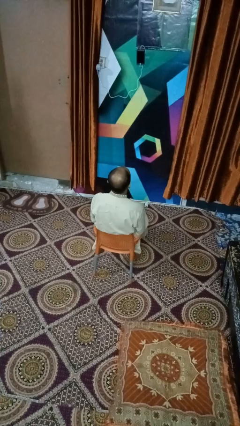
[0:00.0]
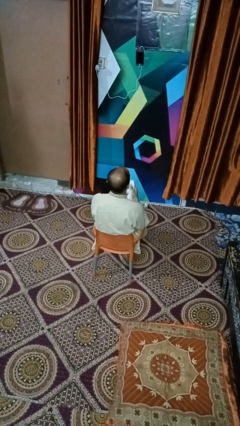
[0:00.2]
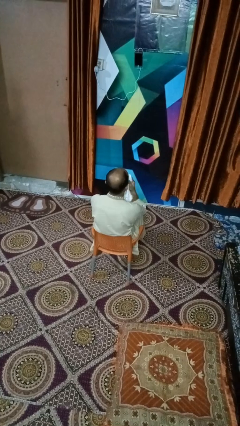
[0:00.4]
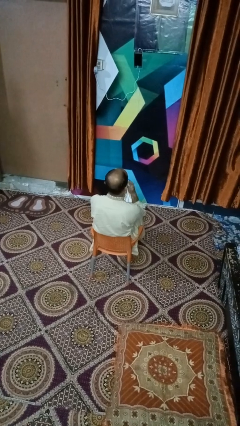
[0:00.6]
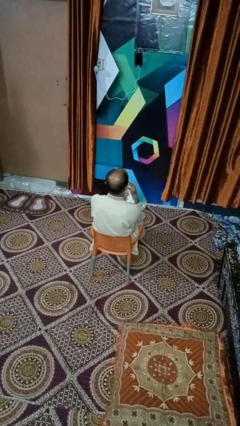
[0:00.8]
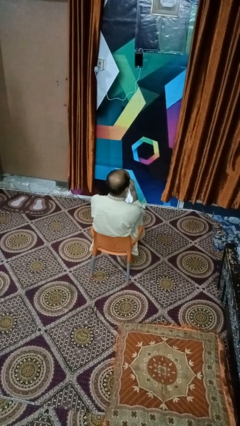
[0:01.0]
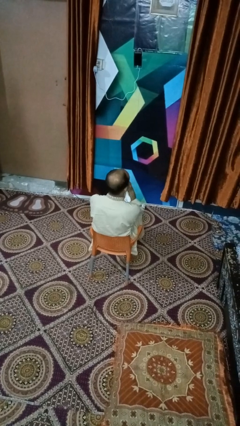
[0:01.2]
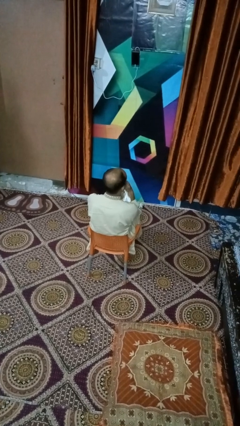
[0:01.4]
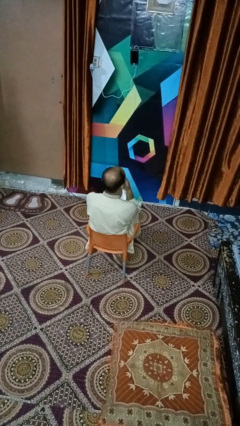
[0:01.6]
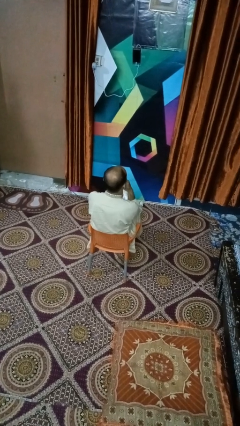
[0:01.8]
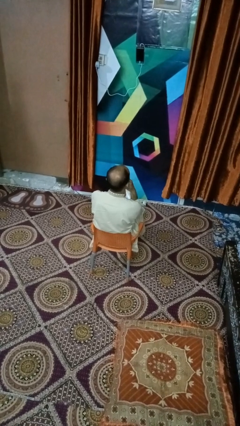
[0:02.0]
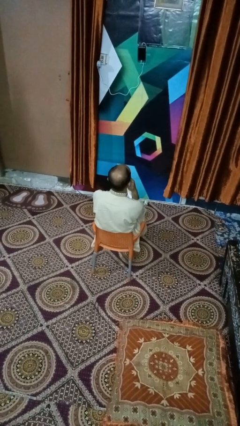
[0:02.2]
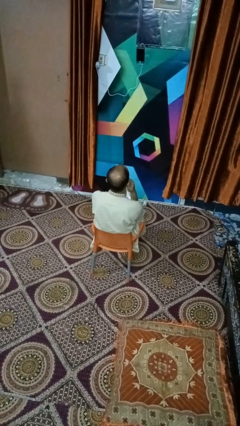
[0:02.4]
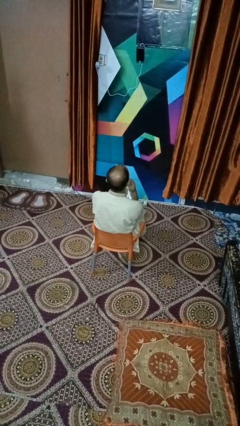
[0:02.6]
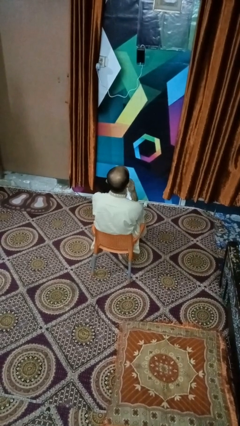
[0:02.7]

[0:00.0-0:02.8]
person wipes mouth with napkin

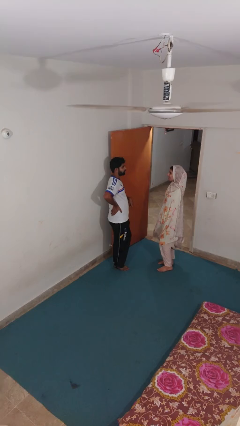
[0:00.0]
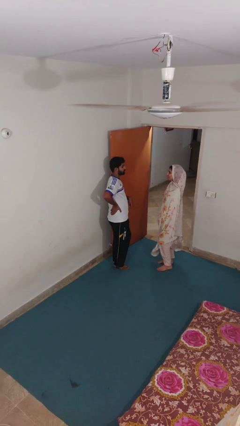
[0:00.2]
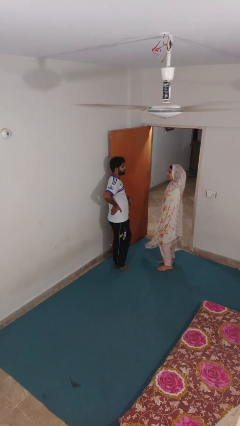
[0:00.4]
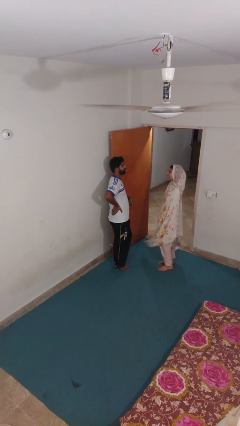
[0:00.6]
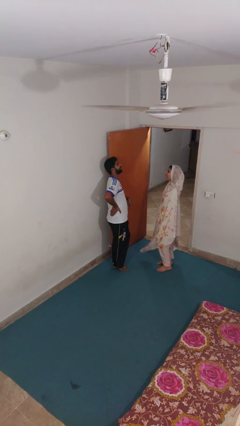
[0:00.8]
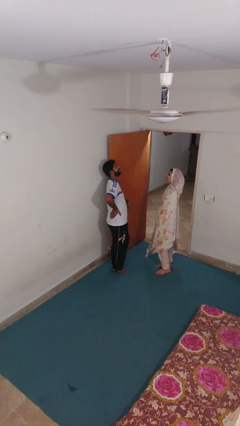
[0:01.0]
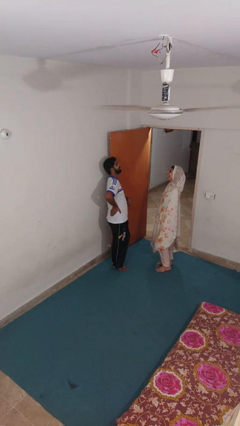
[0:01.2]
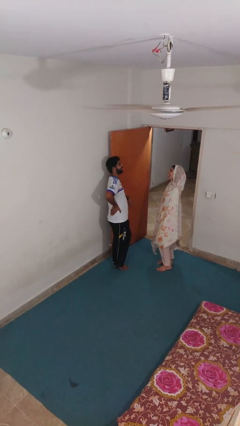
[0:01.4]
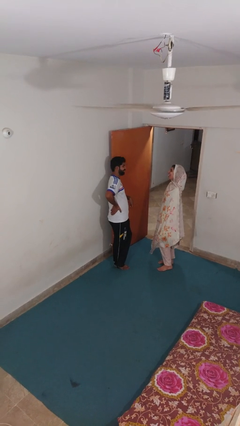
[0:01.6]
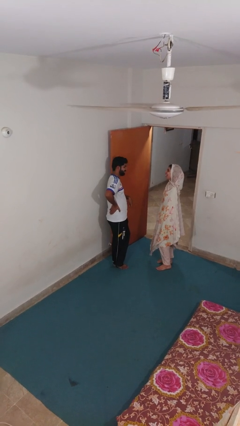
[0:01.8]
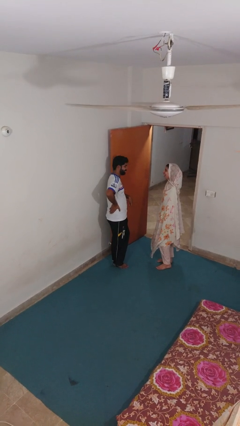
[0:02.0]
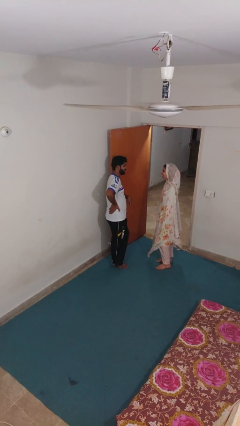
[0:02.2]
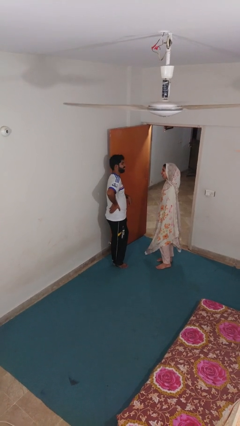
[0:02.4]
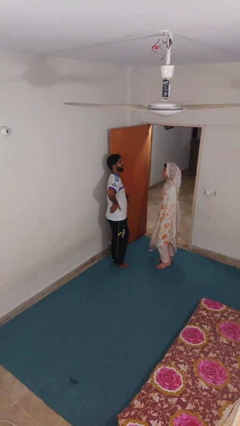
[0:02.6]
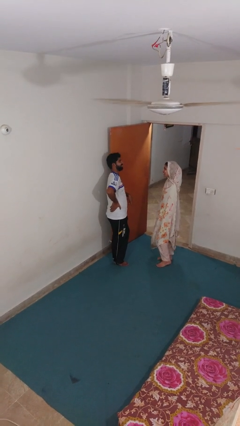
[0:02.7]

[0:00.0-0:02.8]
person laughs with person

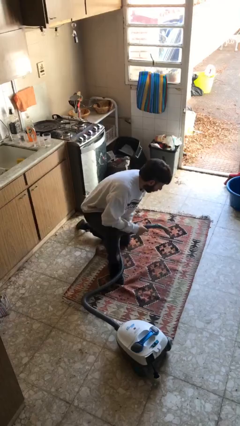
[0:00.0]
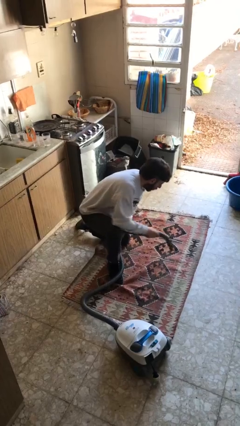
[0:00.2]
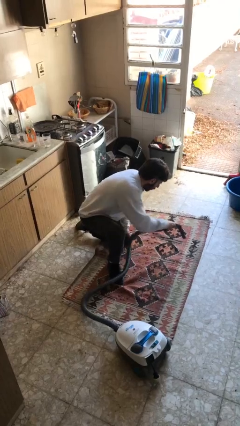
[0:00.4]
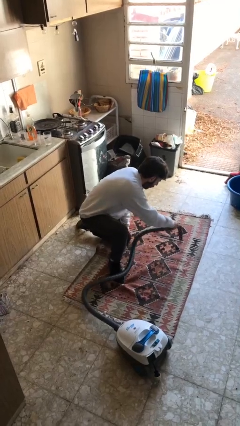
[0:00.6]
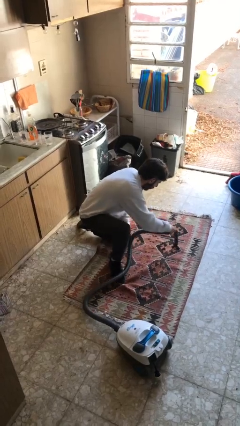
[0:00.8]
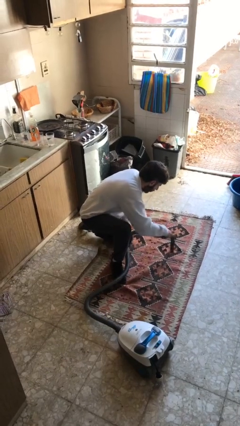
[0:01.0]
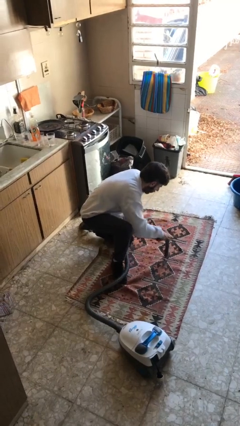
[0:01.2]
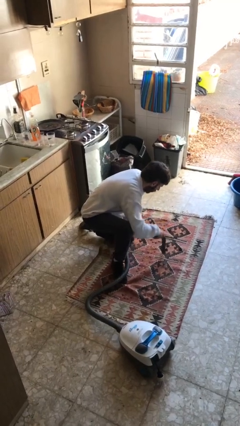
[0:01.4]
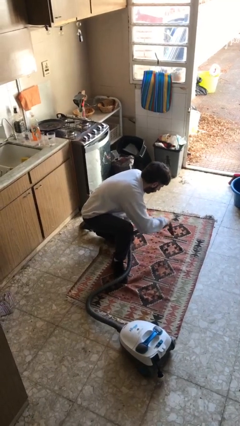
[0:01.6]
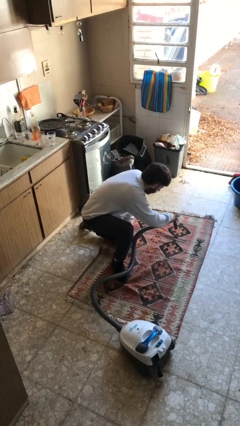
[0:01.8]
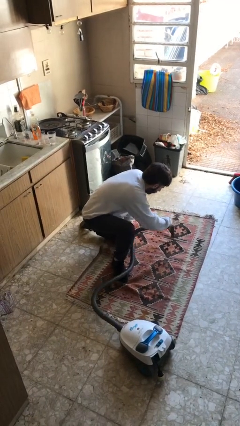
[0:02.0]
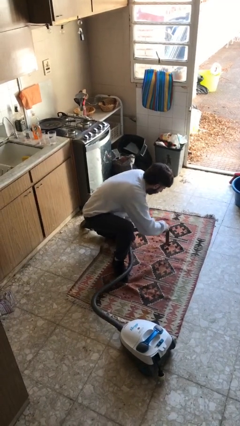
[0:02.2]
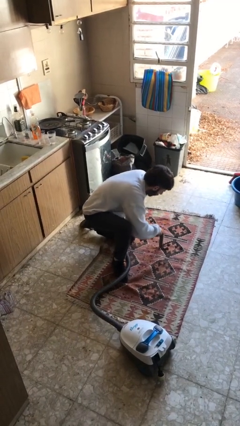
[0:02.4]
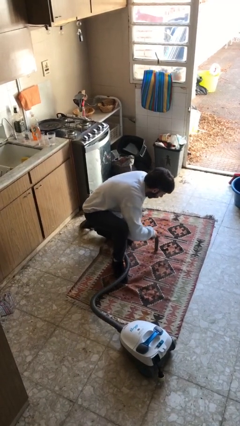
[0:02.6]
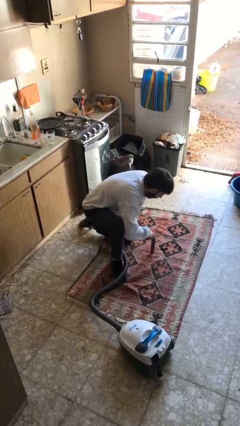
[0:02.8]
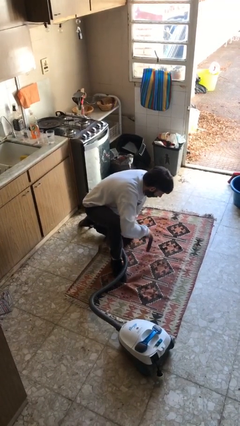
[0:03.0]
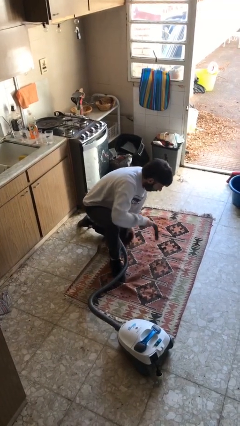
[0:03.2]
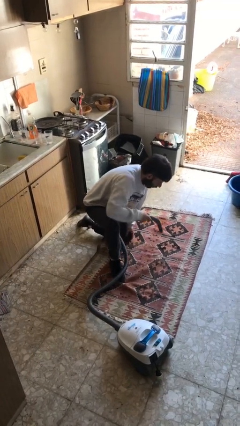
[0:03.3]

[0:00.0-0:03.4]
person vacuums carpet

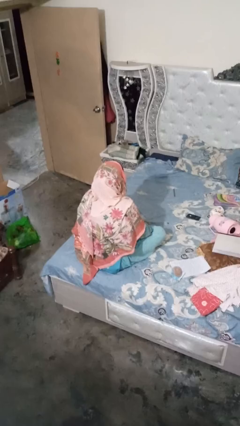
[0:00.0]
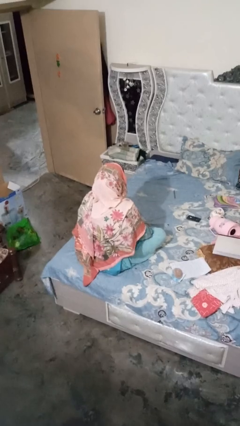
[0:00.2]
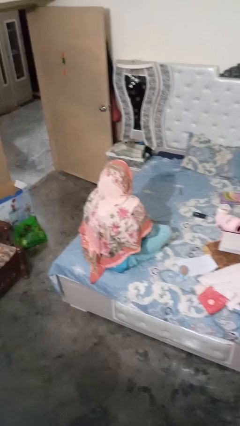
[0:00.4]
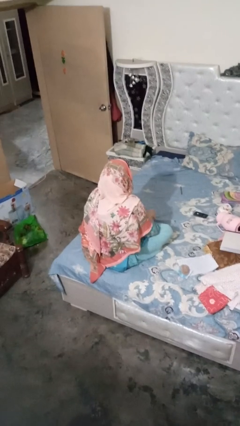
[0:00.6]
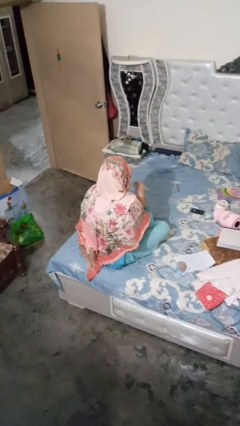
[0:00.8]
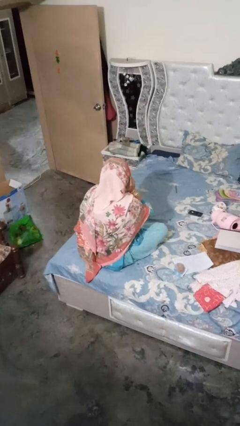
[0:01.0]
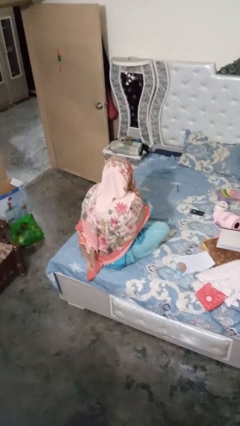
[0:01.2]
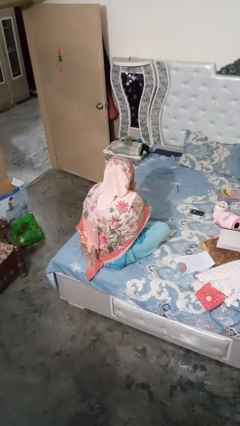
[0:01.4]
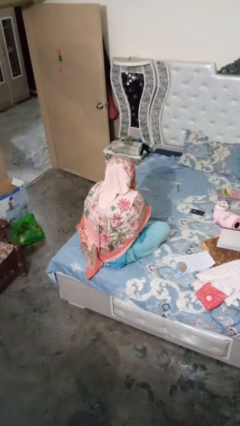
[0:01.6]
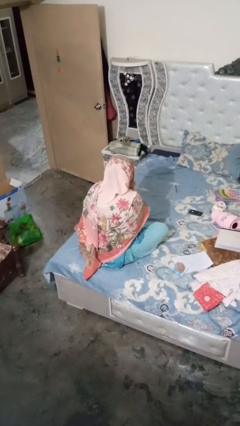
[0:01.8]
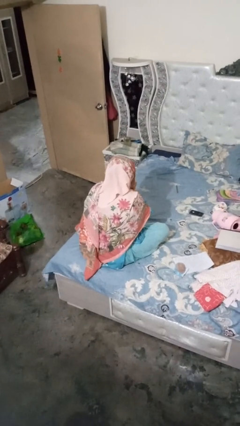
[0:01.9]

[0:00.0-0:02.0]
person gestures listen closely

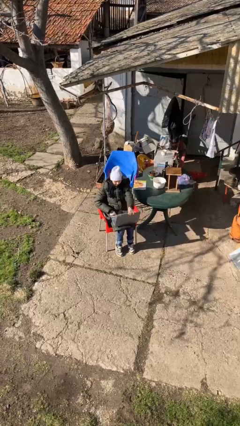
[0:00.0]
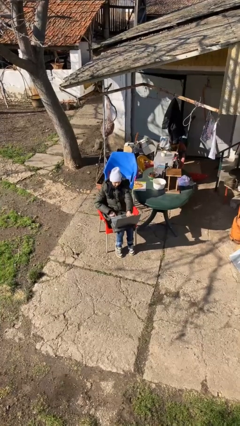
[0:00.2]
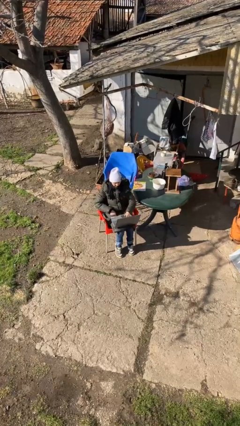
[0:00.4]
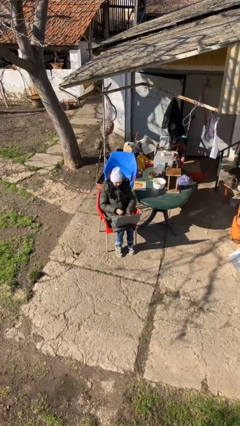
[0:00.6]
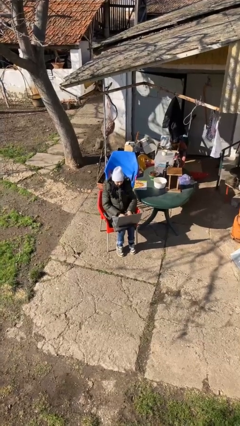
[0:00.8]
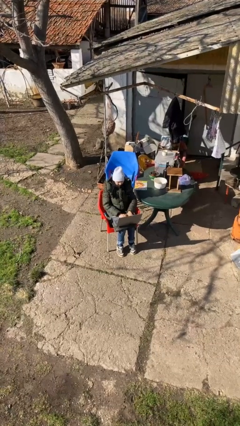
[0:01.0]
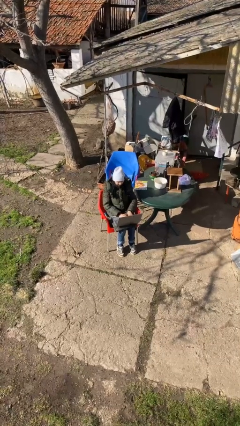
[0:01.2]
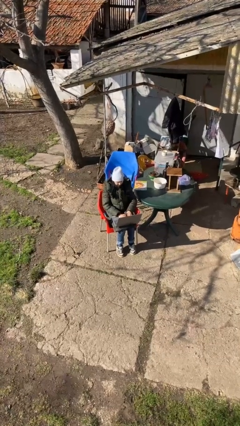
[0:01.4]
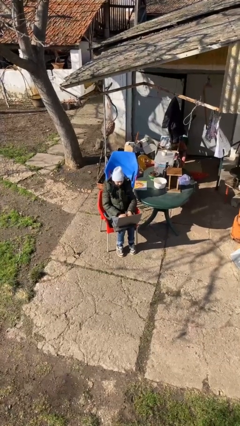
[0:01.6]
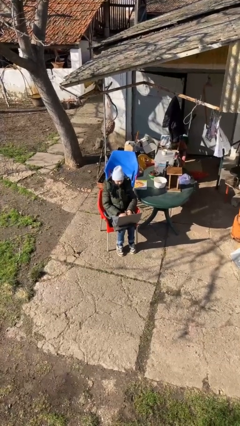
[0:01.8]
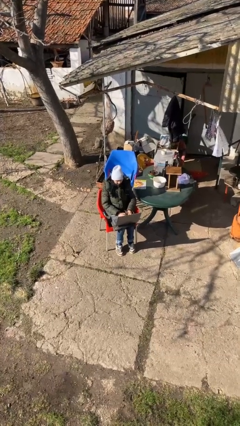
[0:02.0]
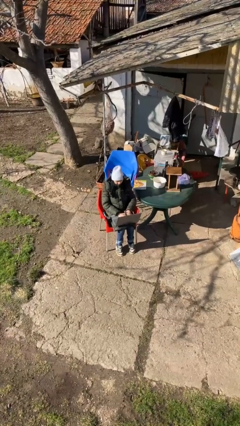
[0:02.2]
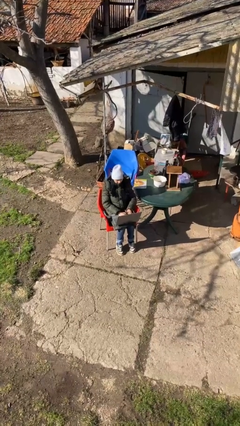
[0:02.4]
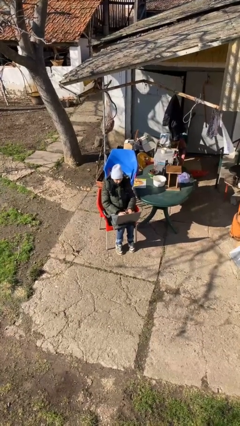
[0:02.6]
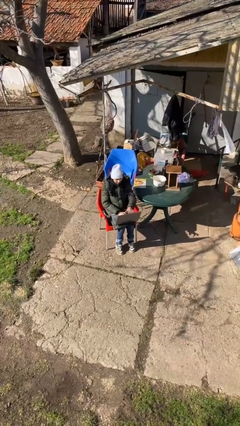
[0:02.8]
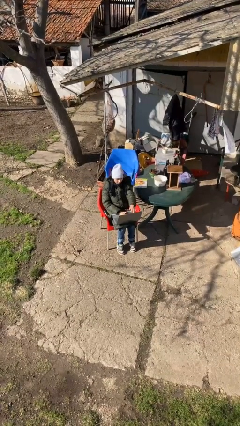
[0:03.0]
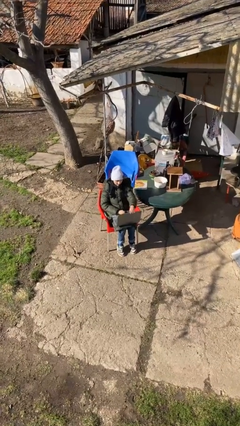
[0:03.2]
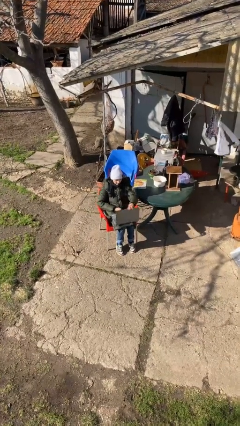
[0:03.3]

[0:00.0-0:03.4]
person interacts with laptop

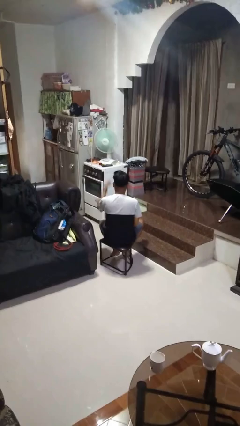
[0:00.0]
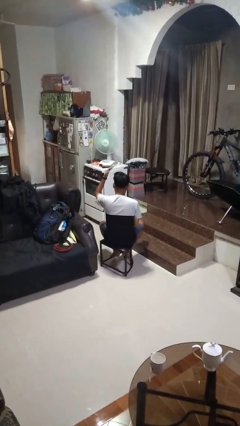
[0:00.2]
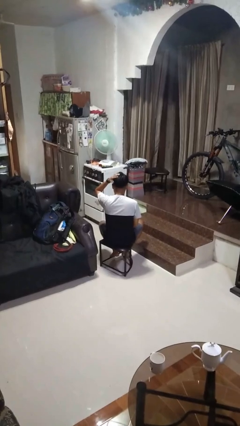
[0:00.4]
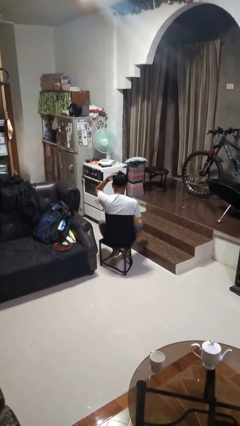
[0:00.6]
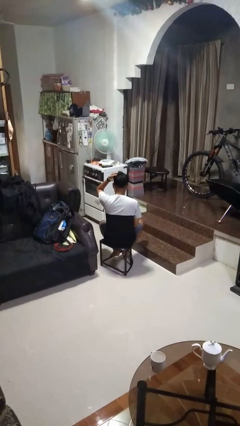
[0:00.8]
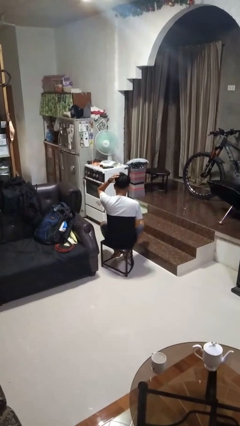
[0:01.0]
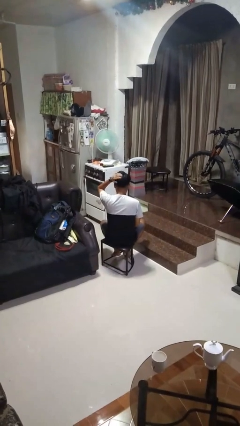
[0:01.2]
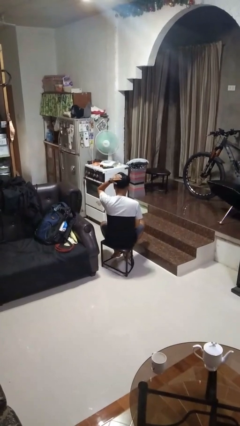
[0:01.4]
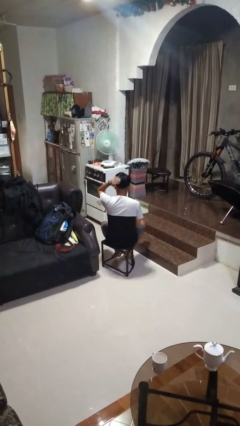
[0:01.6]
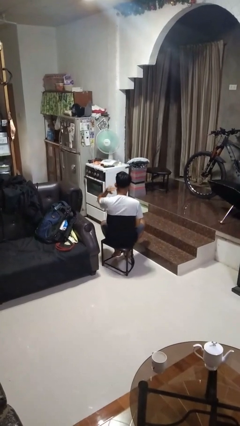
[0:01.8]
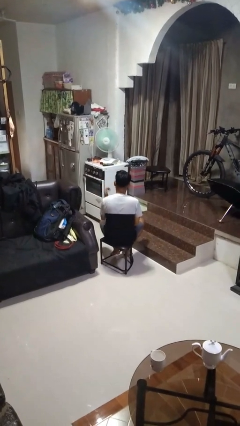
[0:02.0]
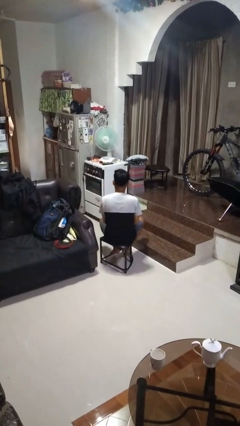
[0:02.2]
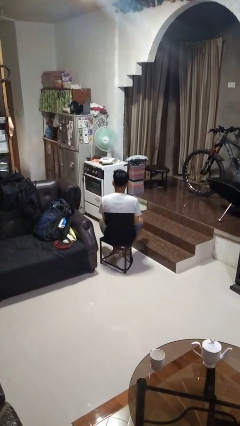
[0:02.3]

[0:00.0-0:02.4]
person pats head

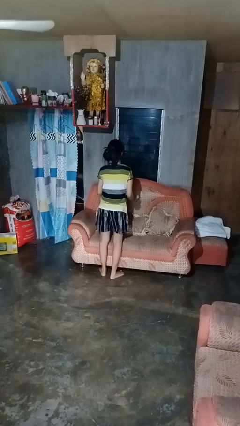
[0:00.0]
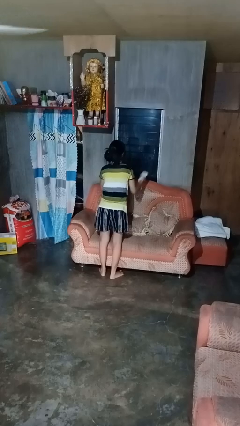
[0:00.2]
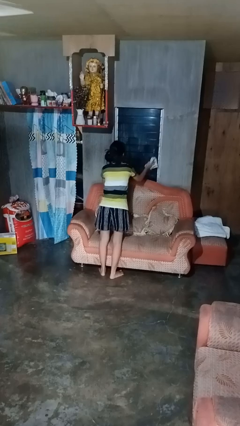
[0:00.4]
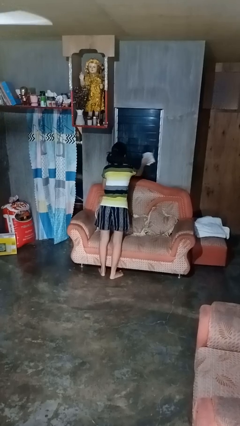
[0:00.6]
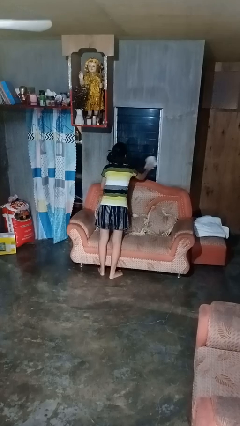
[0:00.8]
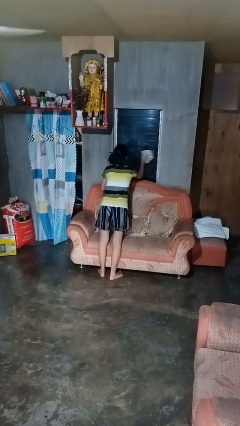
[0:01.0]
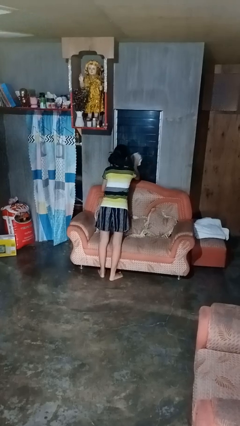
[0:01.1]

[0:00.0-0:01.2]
person washes window
